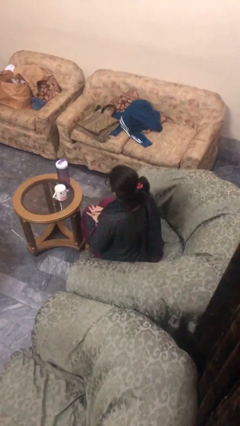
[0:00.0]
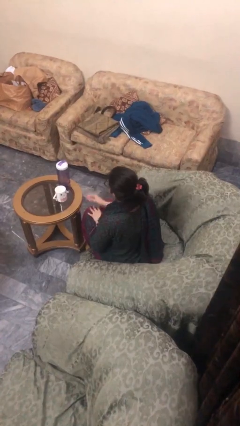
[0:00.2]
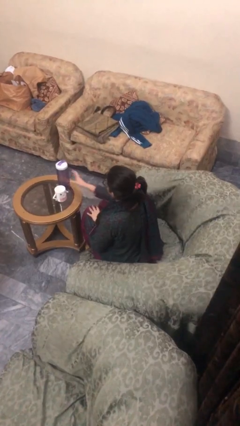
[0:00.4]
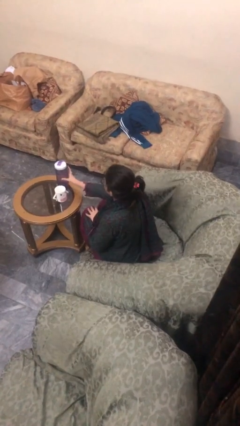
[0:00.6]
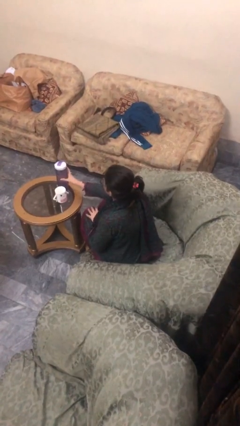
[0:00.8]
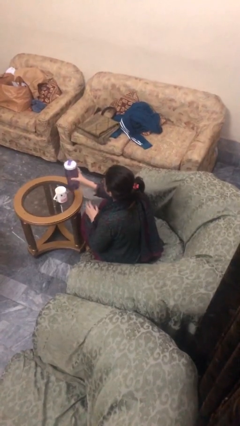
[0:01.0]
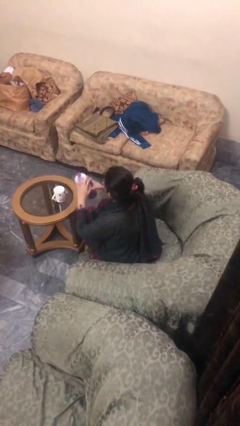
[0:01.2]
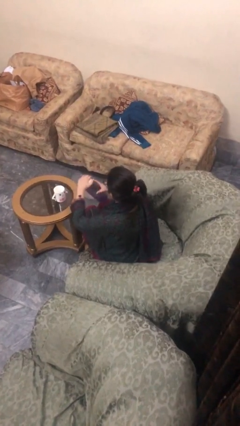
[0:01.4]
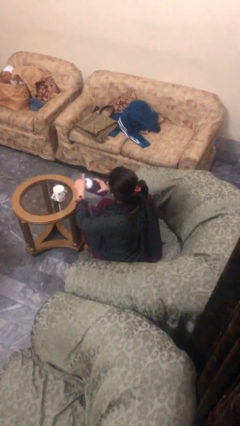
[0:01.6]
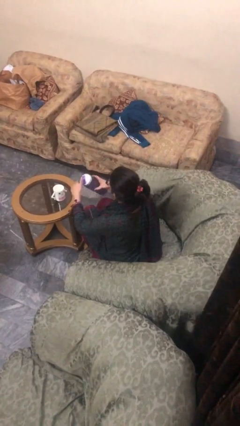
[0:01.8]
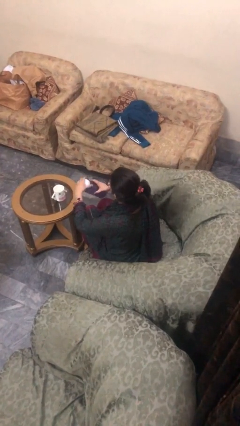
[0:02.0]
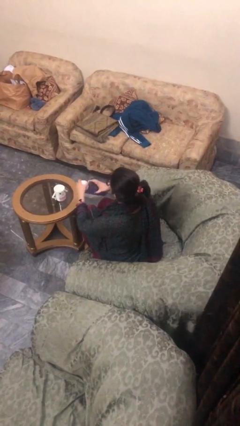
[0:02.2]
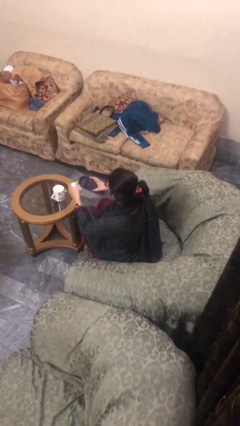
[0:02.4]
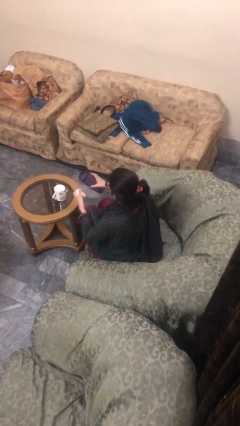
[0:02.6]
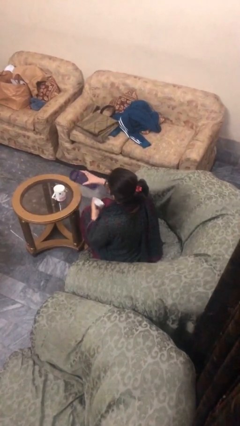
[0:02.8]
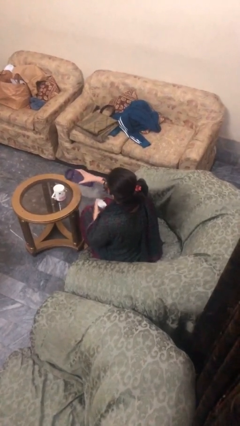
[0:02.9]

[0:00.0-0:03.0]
person unscrews lid from bottle

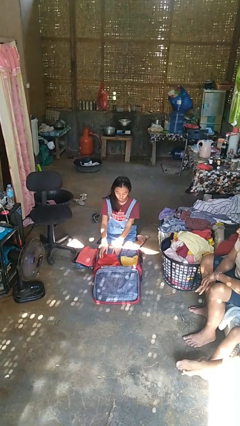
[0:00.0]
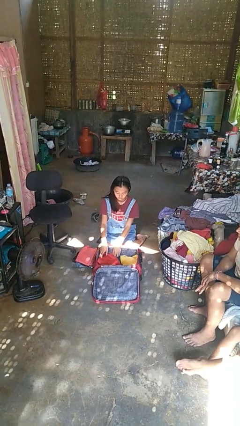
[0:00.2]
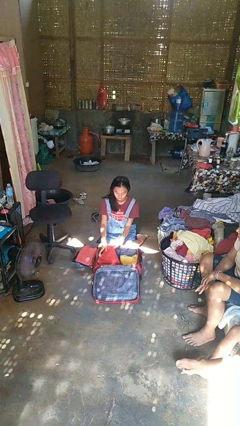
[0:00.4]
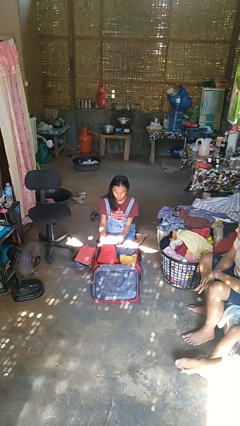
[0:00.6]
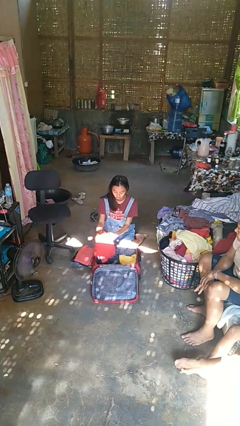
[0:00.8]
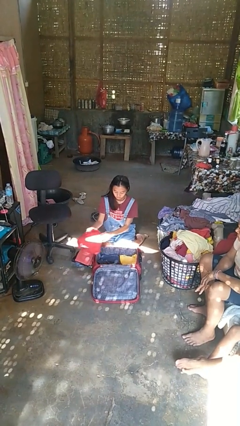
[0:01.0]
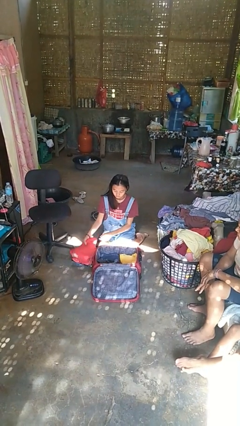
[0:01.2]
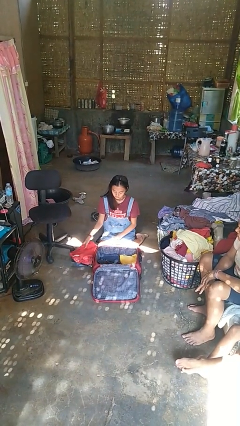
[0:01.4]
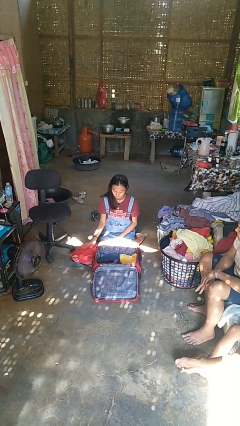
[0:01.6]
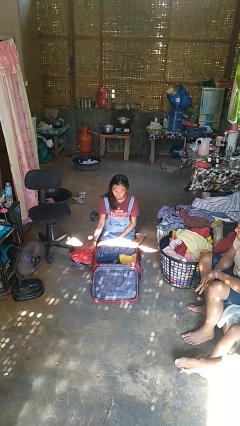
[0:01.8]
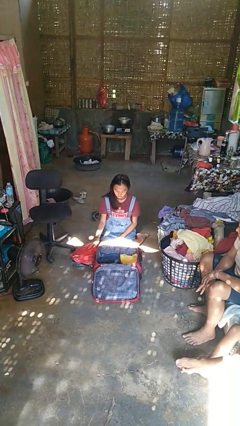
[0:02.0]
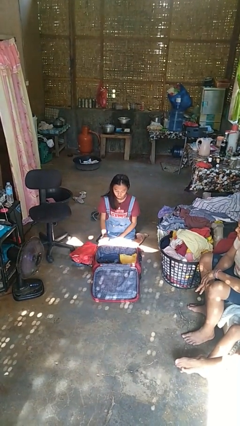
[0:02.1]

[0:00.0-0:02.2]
person unloads clothes from suitcase

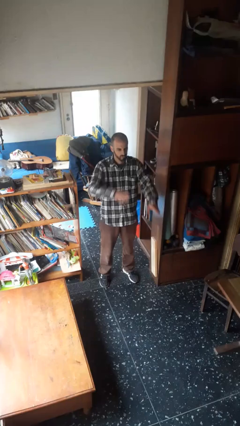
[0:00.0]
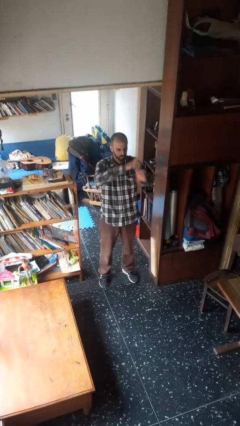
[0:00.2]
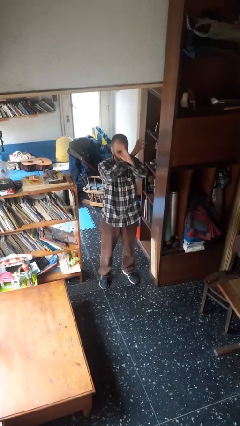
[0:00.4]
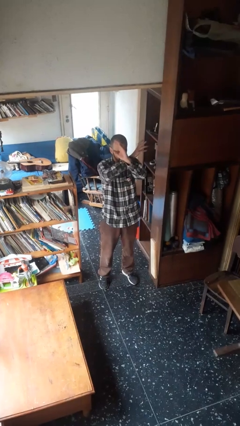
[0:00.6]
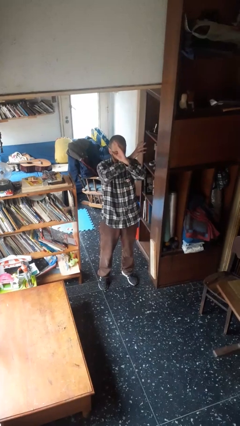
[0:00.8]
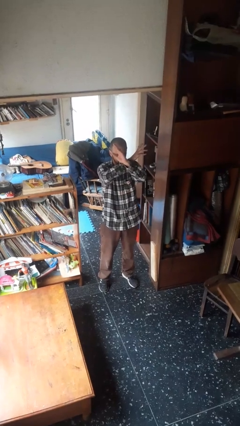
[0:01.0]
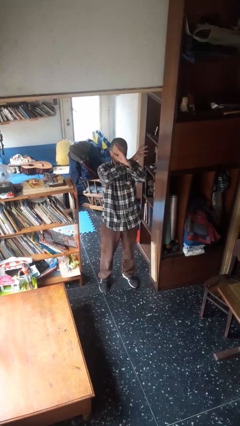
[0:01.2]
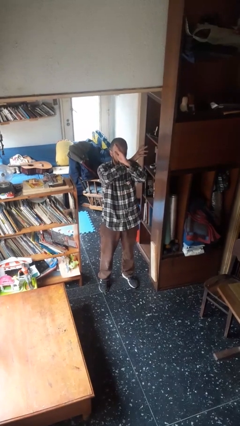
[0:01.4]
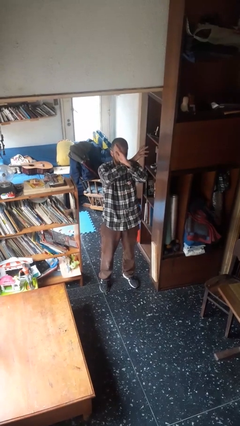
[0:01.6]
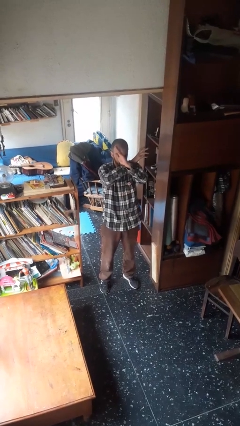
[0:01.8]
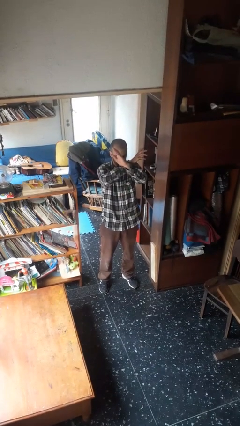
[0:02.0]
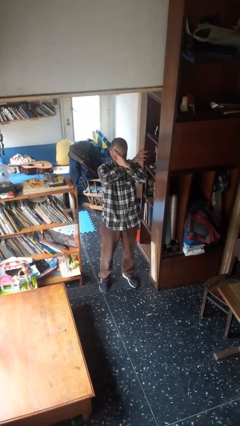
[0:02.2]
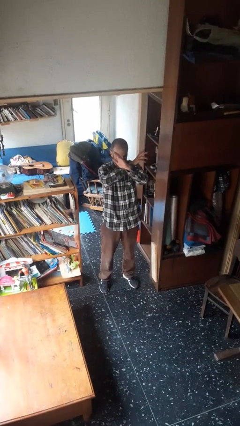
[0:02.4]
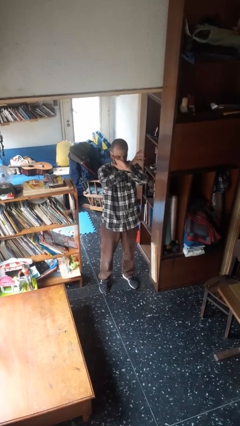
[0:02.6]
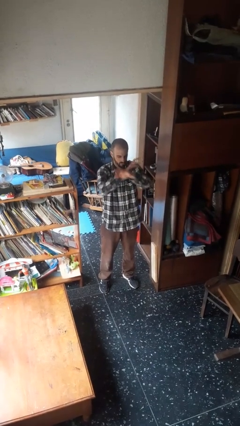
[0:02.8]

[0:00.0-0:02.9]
person gestures arms x

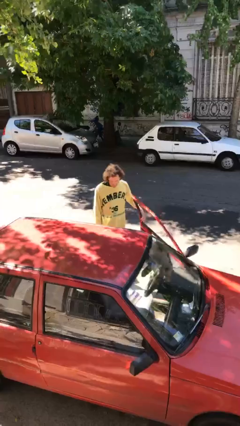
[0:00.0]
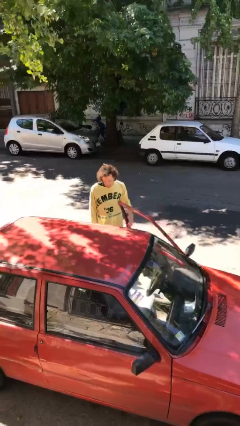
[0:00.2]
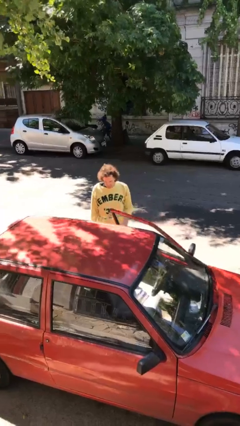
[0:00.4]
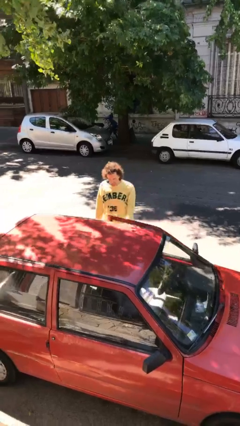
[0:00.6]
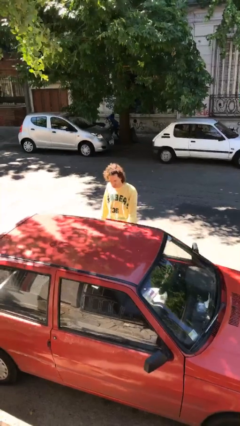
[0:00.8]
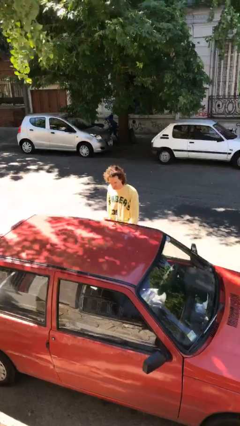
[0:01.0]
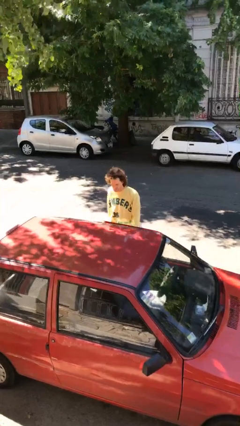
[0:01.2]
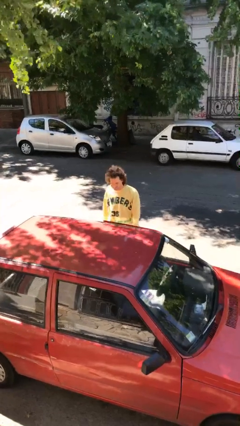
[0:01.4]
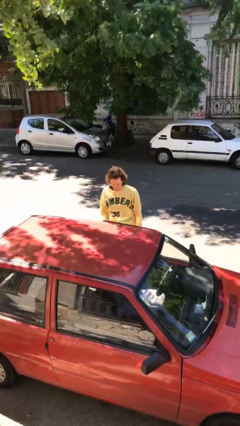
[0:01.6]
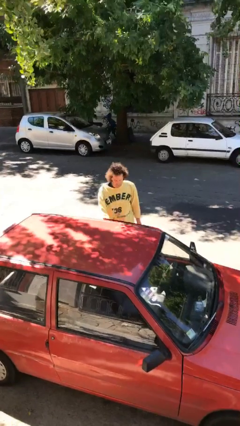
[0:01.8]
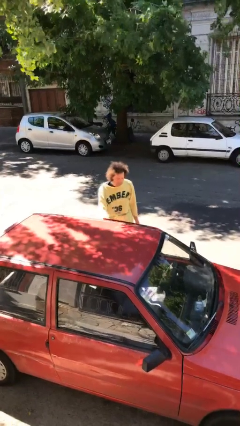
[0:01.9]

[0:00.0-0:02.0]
person closes car door

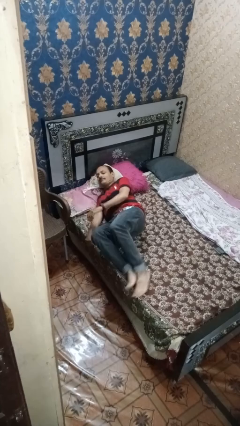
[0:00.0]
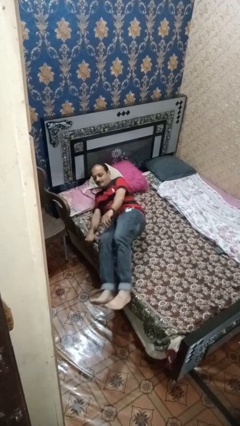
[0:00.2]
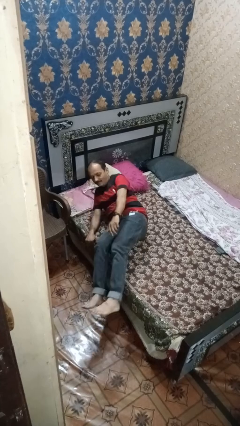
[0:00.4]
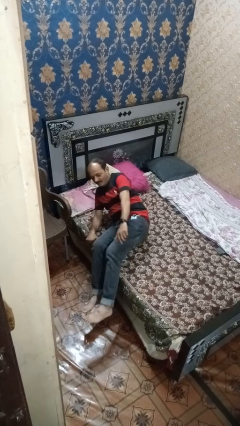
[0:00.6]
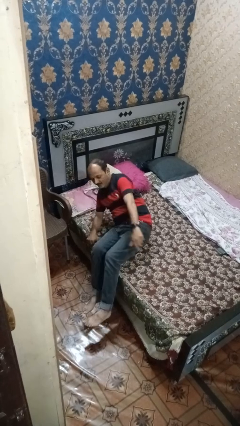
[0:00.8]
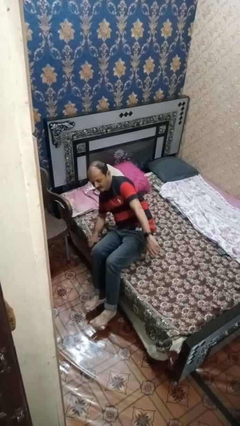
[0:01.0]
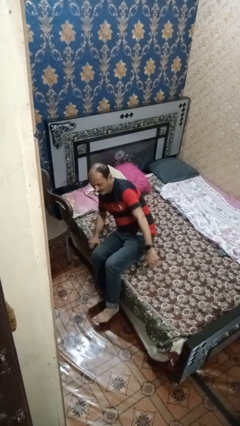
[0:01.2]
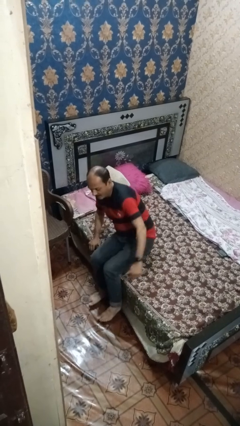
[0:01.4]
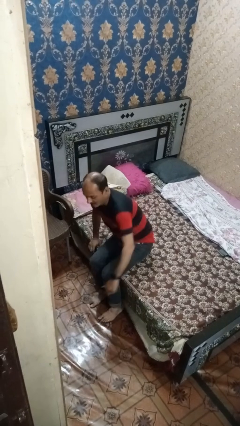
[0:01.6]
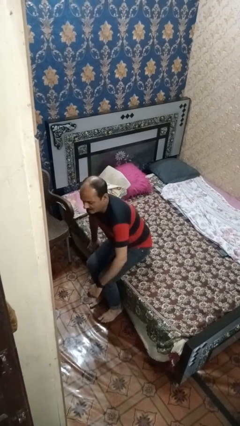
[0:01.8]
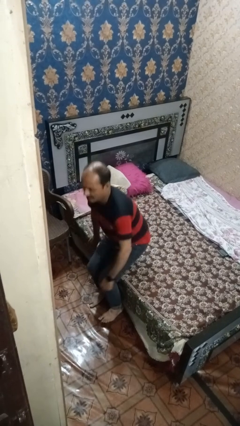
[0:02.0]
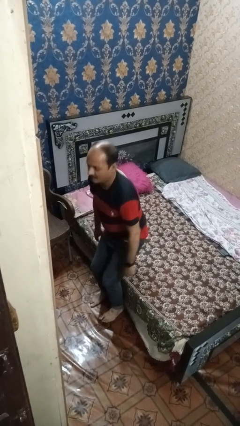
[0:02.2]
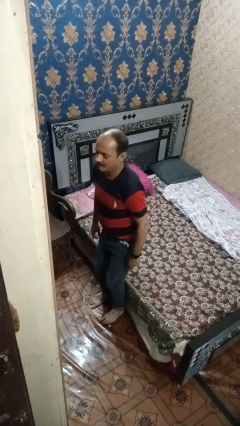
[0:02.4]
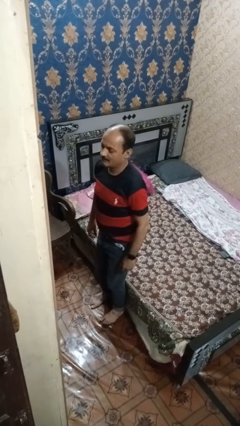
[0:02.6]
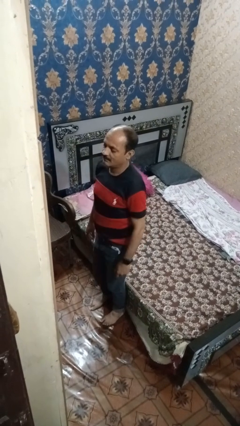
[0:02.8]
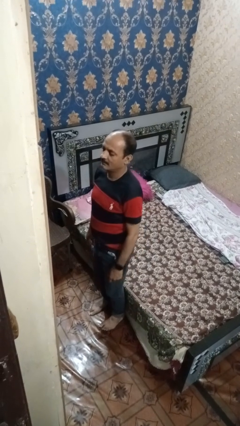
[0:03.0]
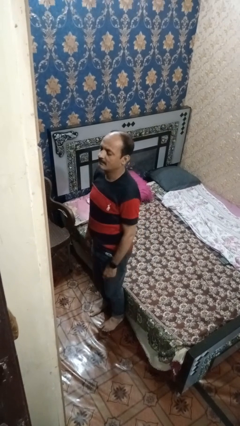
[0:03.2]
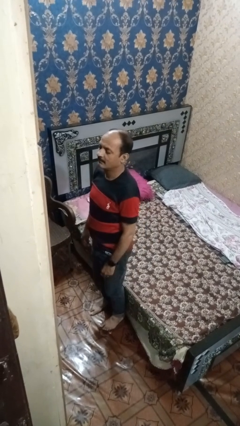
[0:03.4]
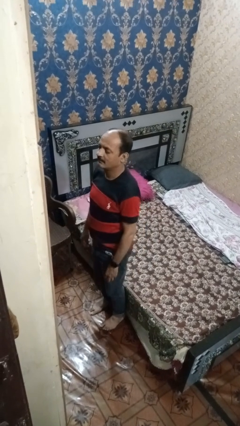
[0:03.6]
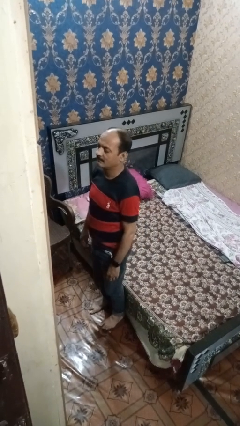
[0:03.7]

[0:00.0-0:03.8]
person stands up

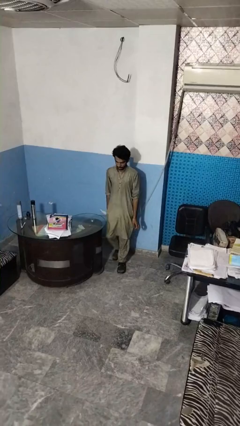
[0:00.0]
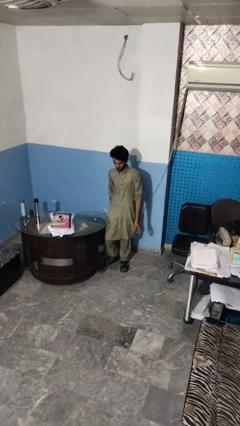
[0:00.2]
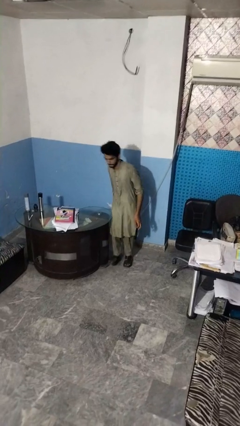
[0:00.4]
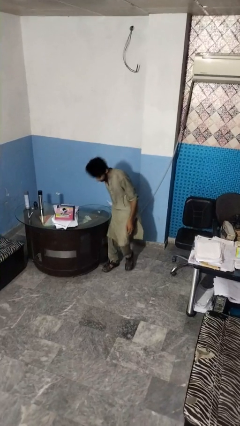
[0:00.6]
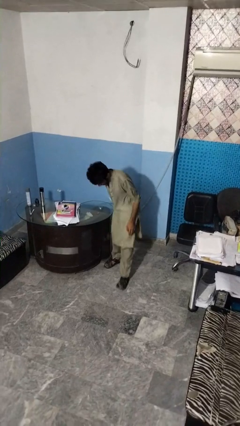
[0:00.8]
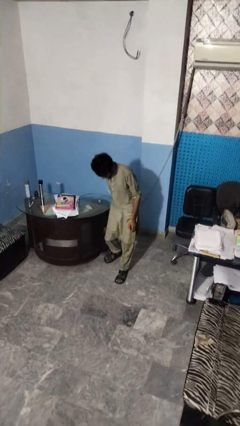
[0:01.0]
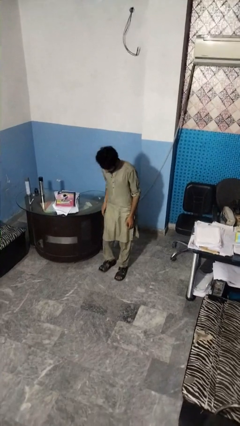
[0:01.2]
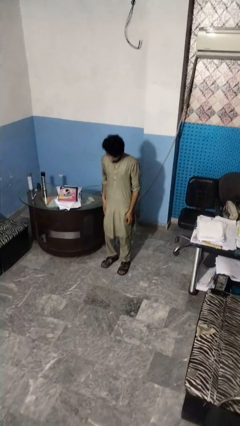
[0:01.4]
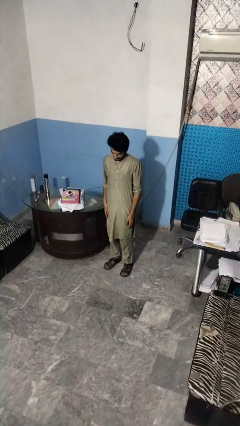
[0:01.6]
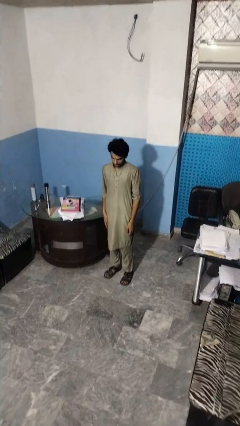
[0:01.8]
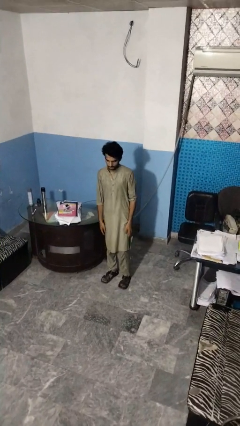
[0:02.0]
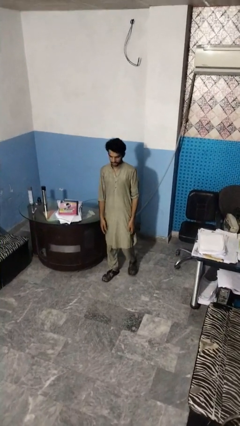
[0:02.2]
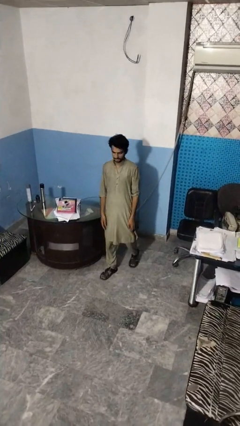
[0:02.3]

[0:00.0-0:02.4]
person bumps into table

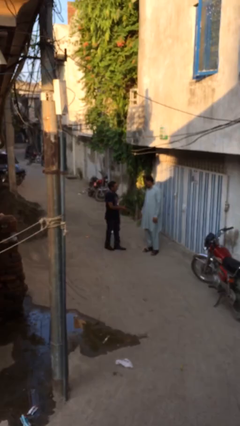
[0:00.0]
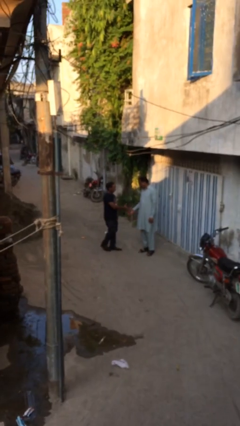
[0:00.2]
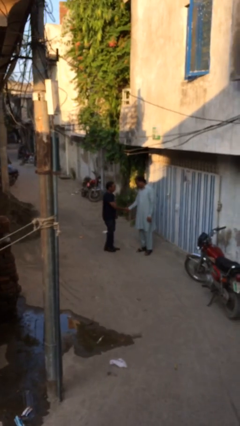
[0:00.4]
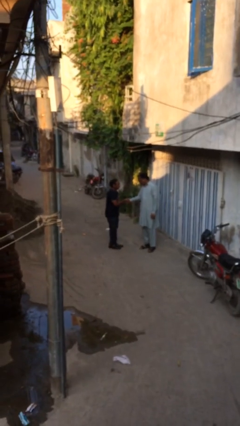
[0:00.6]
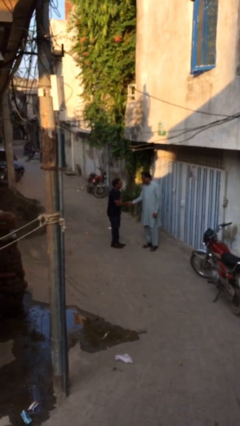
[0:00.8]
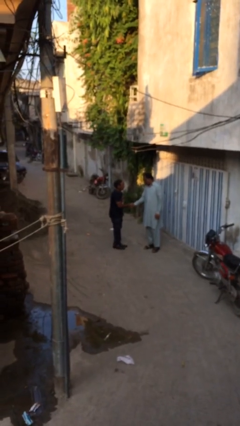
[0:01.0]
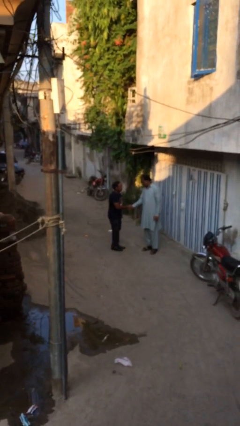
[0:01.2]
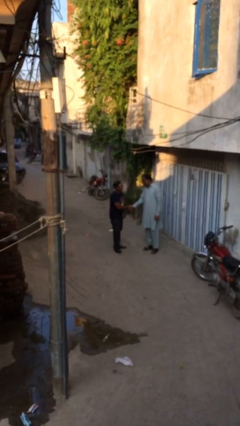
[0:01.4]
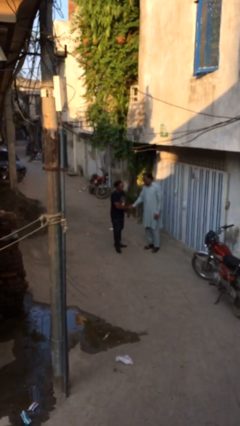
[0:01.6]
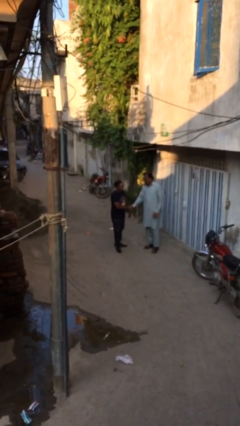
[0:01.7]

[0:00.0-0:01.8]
person shakes hand
